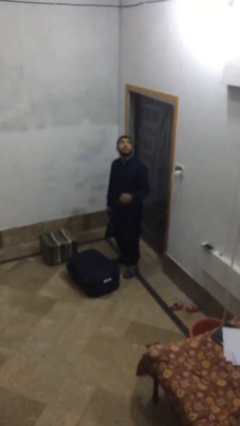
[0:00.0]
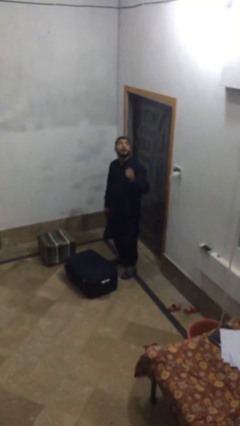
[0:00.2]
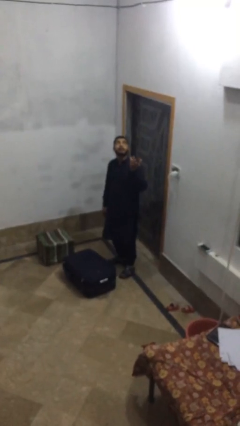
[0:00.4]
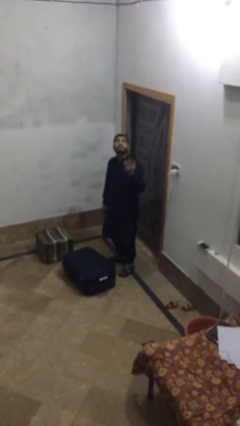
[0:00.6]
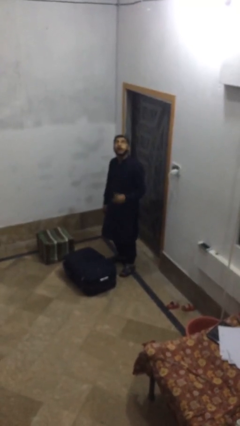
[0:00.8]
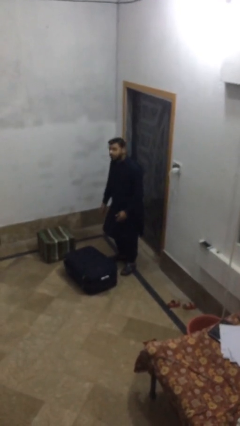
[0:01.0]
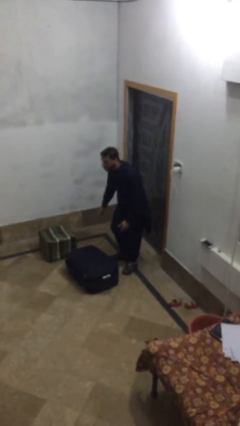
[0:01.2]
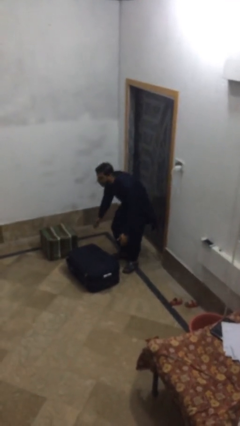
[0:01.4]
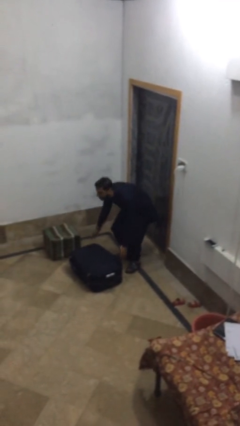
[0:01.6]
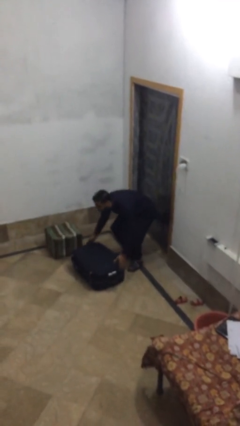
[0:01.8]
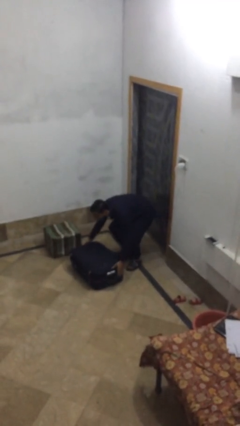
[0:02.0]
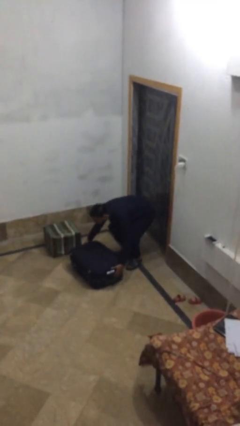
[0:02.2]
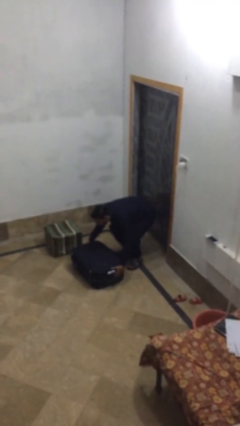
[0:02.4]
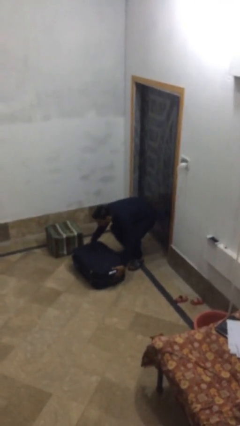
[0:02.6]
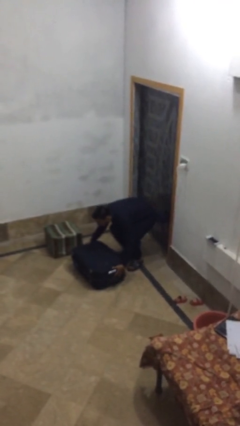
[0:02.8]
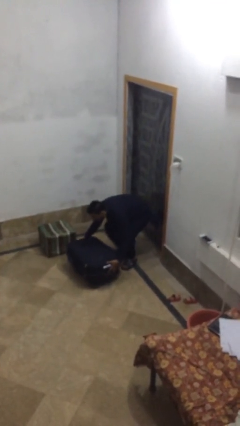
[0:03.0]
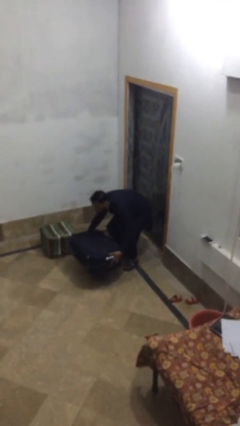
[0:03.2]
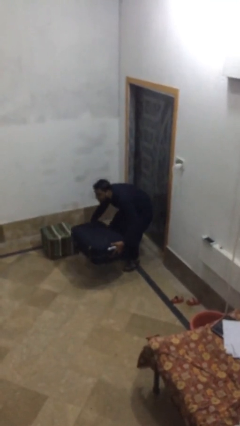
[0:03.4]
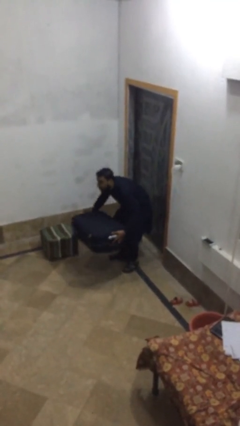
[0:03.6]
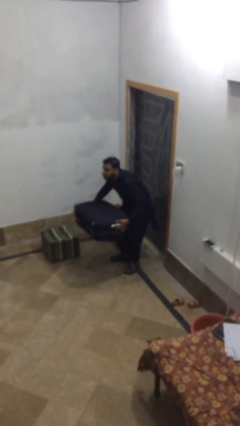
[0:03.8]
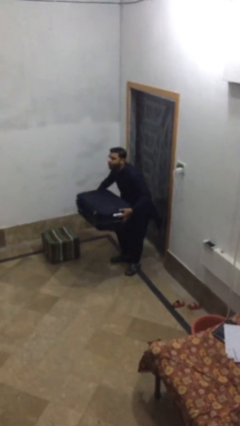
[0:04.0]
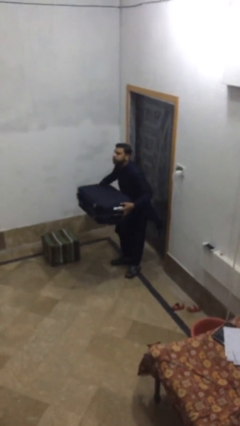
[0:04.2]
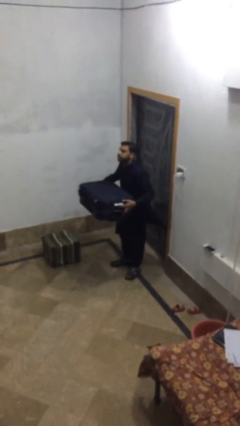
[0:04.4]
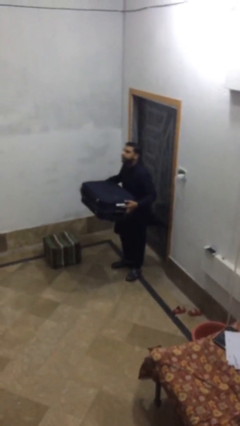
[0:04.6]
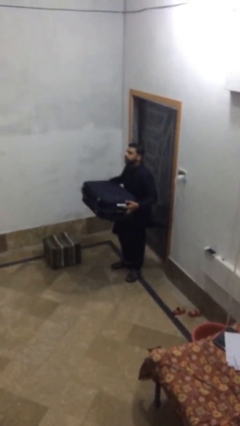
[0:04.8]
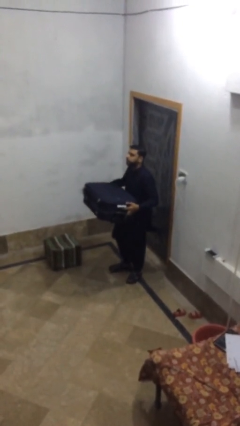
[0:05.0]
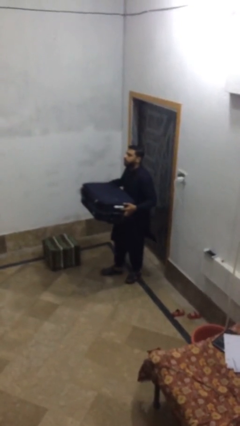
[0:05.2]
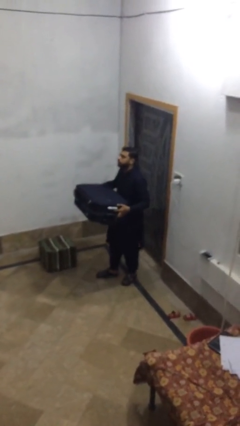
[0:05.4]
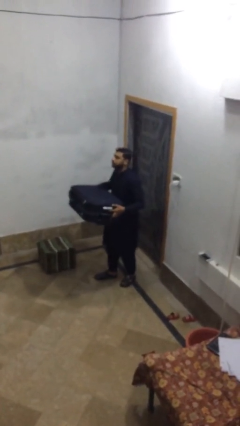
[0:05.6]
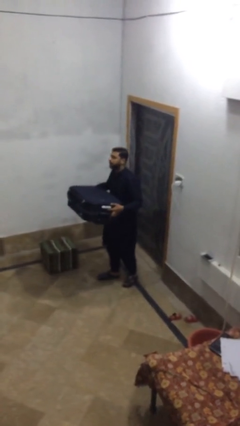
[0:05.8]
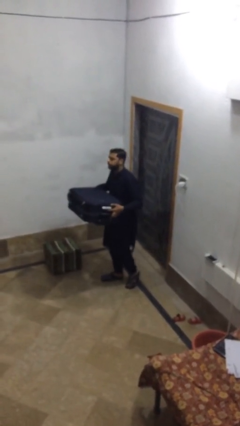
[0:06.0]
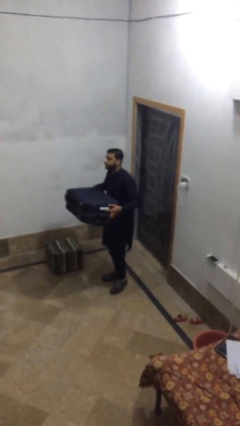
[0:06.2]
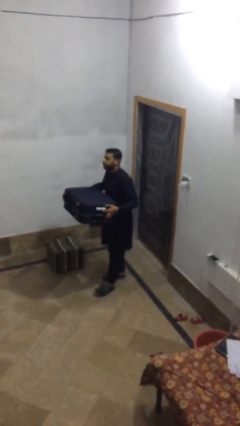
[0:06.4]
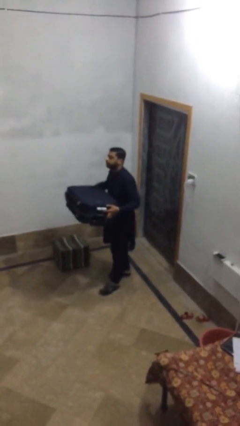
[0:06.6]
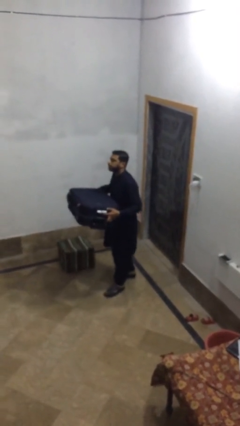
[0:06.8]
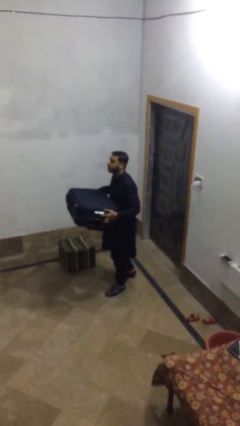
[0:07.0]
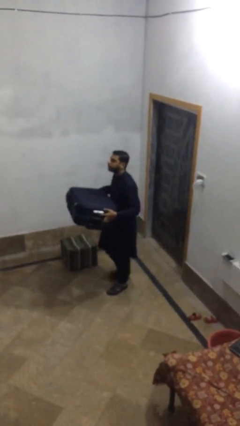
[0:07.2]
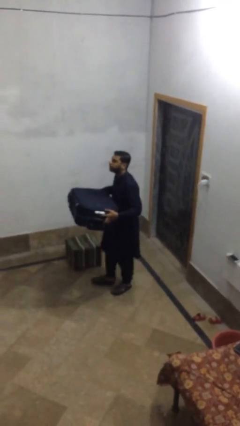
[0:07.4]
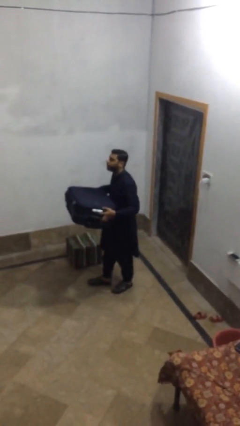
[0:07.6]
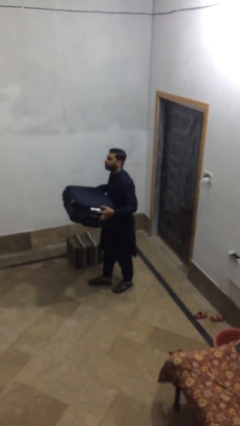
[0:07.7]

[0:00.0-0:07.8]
person carries heavy object

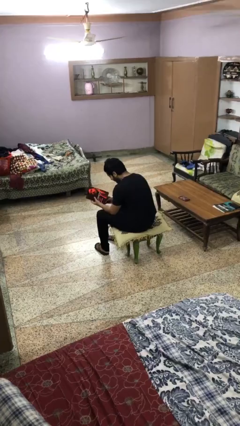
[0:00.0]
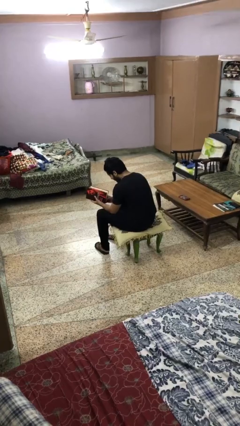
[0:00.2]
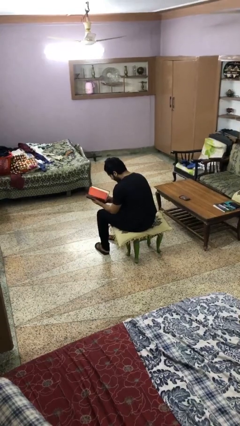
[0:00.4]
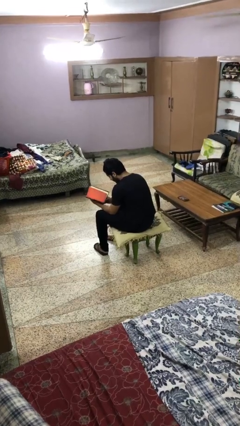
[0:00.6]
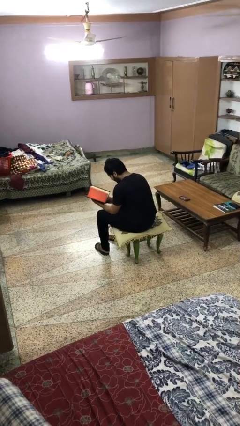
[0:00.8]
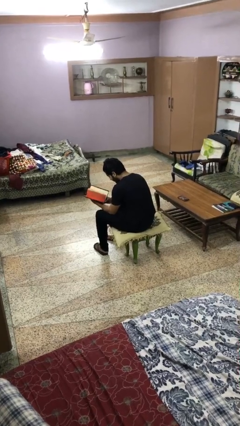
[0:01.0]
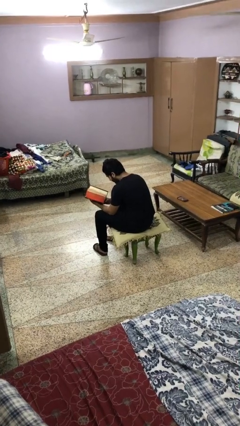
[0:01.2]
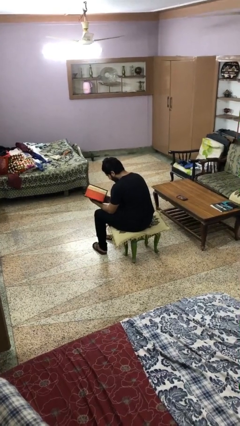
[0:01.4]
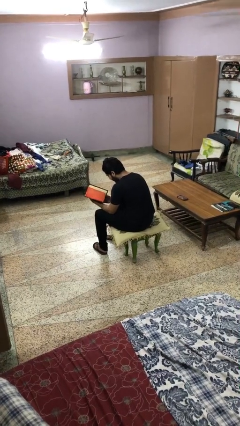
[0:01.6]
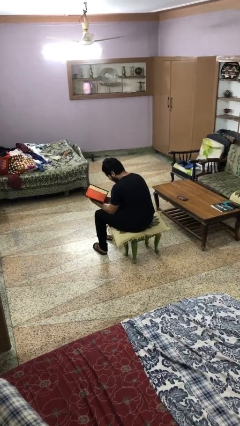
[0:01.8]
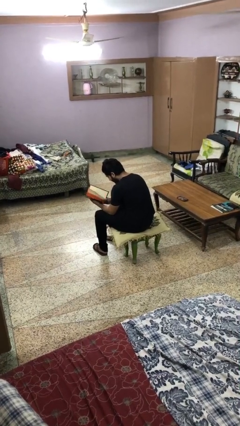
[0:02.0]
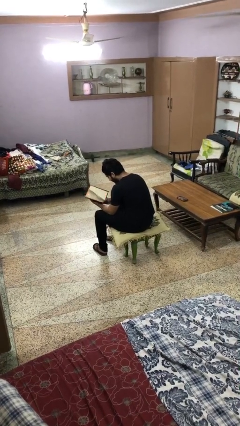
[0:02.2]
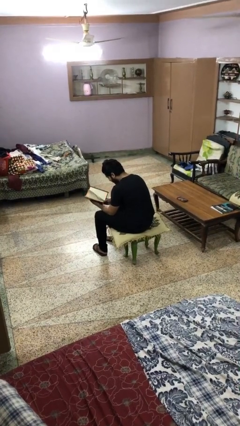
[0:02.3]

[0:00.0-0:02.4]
person reads magazine

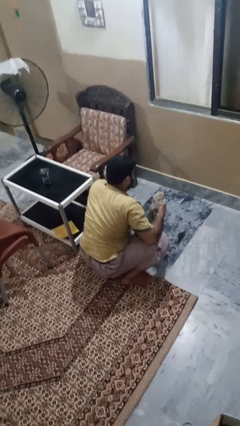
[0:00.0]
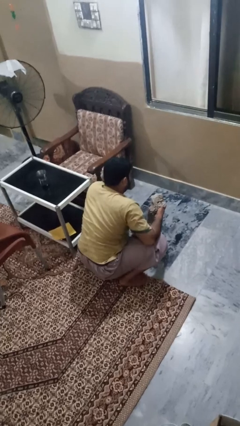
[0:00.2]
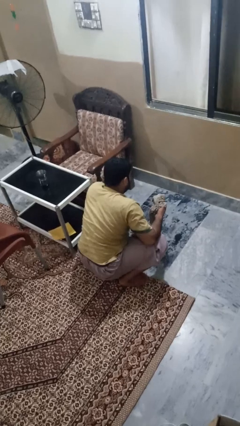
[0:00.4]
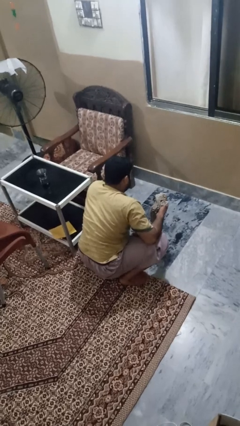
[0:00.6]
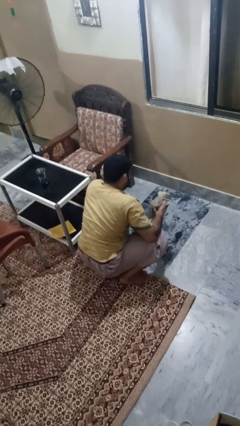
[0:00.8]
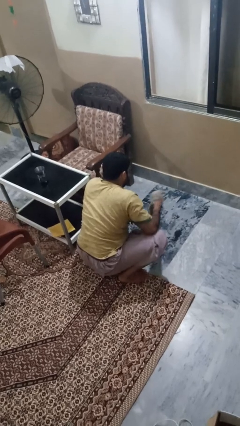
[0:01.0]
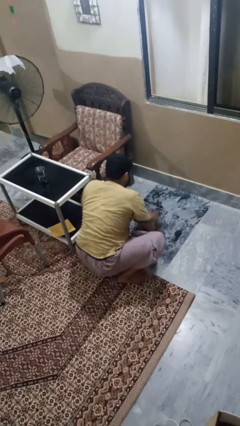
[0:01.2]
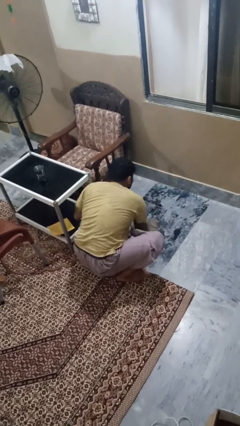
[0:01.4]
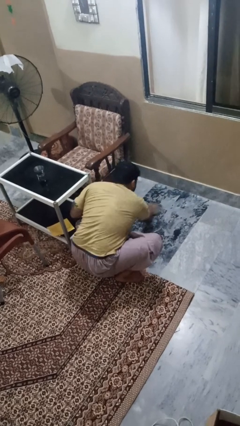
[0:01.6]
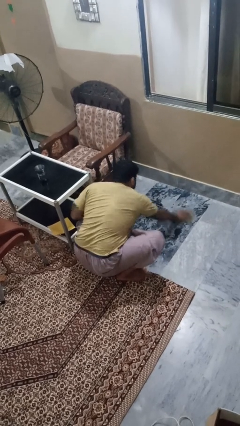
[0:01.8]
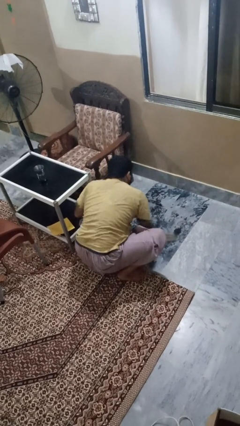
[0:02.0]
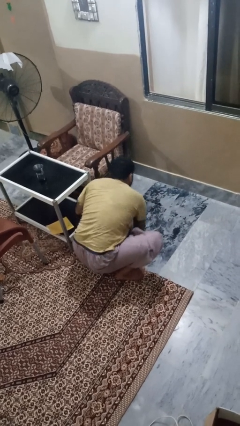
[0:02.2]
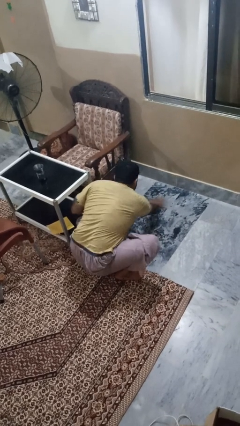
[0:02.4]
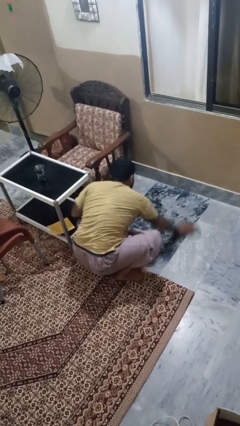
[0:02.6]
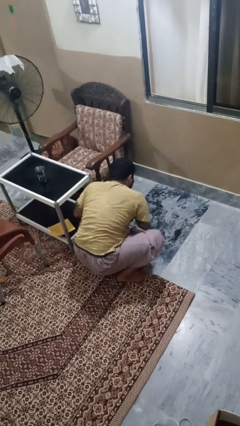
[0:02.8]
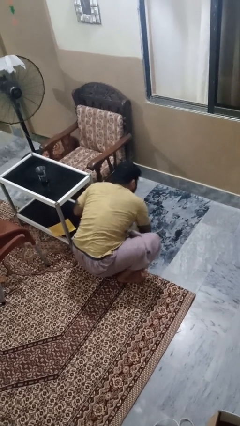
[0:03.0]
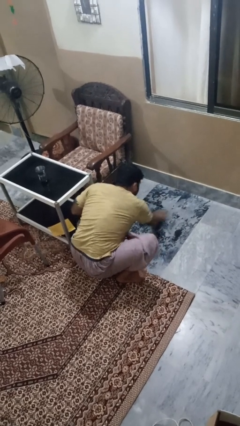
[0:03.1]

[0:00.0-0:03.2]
person mops

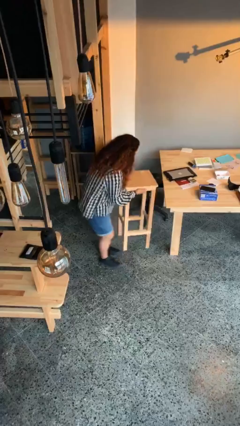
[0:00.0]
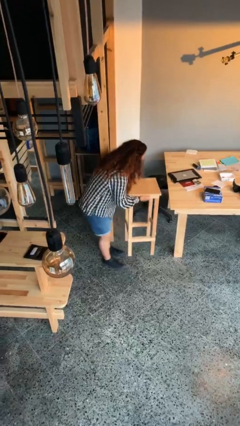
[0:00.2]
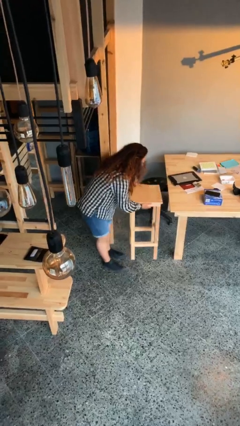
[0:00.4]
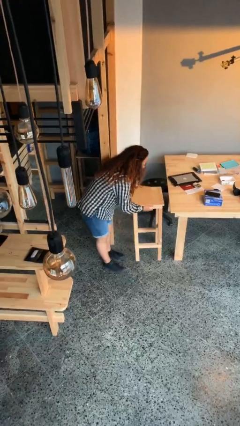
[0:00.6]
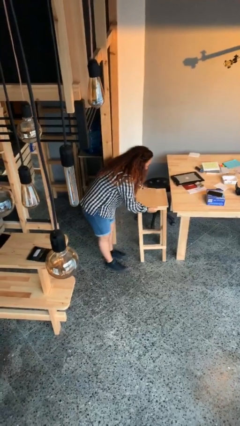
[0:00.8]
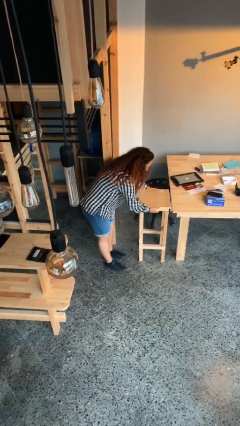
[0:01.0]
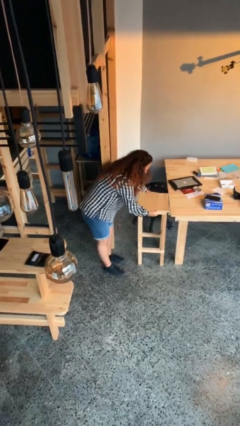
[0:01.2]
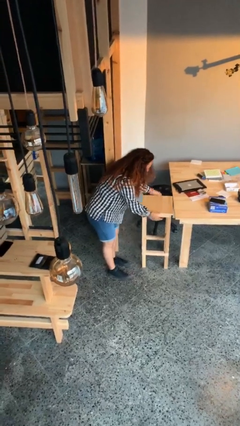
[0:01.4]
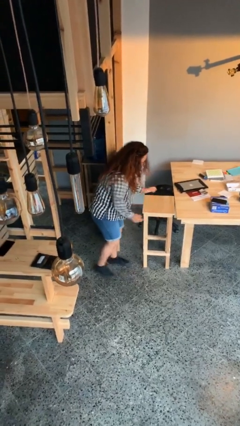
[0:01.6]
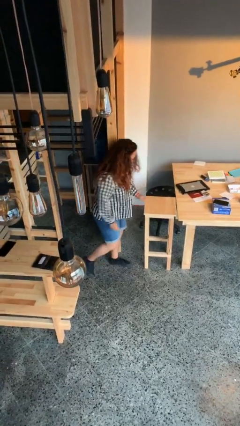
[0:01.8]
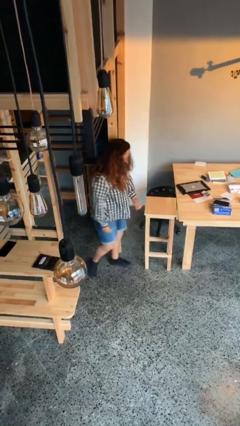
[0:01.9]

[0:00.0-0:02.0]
person puts down object on floor

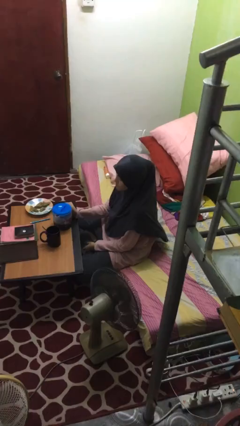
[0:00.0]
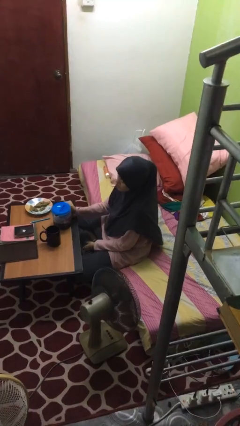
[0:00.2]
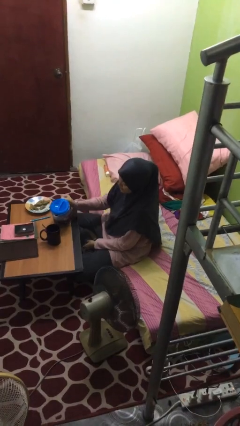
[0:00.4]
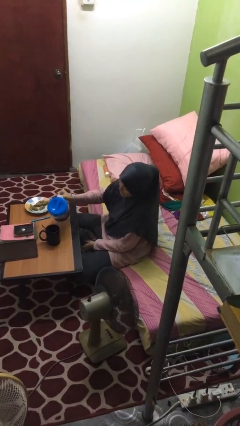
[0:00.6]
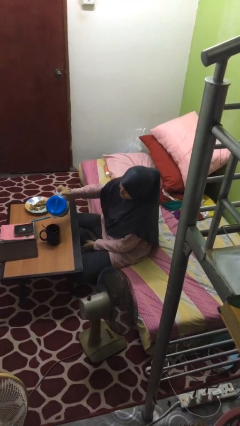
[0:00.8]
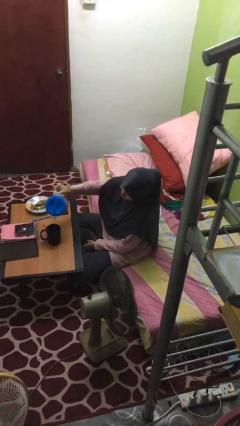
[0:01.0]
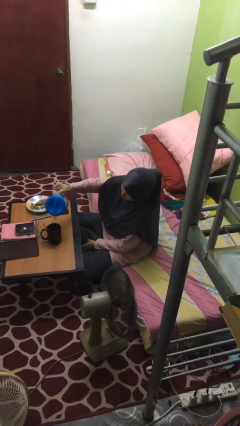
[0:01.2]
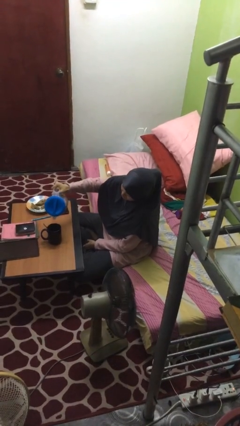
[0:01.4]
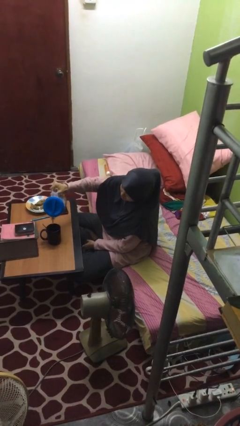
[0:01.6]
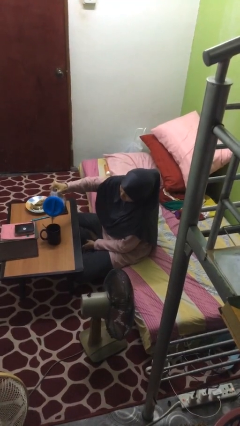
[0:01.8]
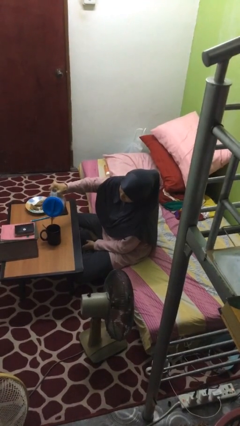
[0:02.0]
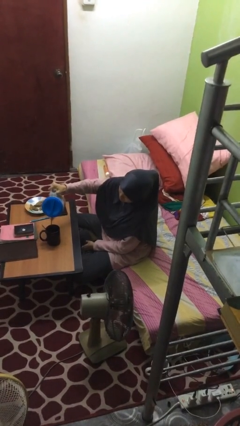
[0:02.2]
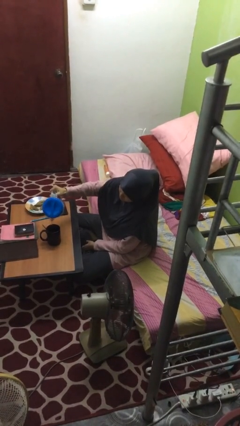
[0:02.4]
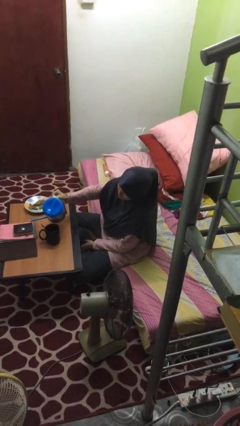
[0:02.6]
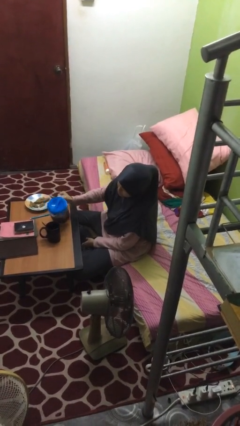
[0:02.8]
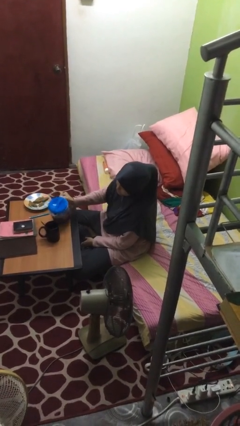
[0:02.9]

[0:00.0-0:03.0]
person pours coffee into mug
